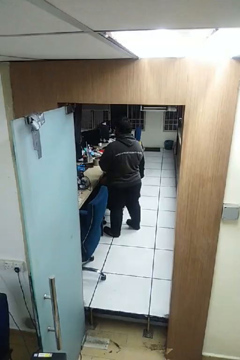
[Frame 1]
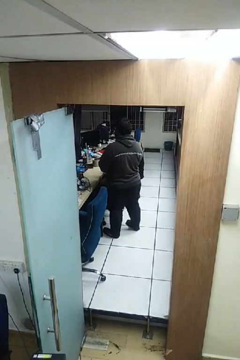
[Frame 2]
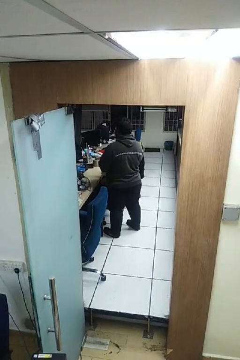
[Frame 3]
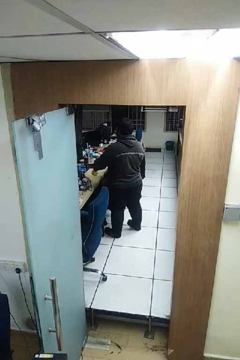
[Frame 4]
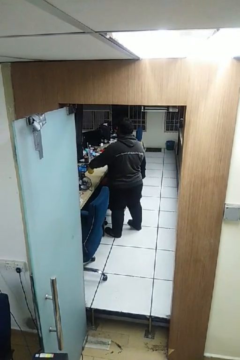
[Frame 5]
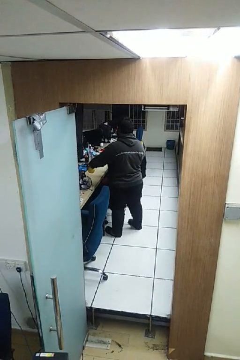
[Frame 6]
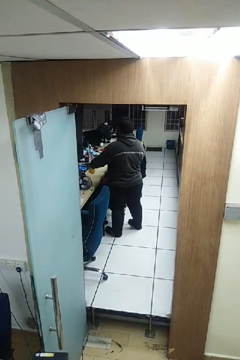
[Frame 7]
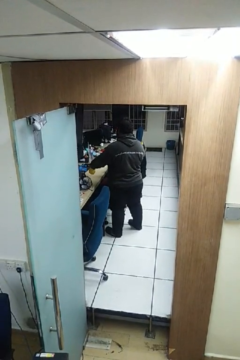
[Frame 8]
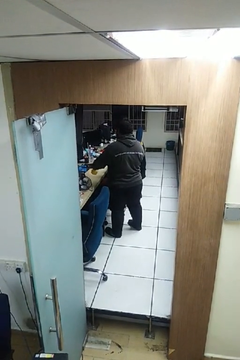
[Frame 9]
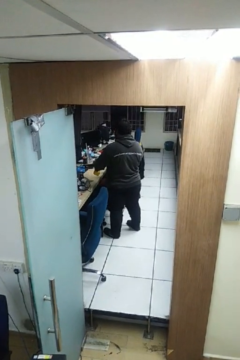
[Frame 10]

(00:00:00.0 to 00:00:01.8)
person sprays from bottle

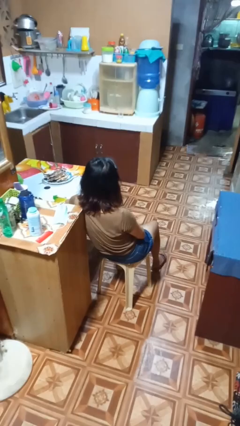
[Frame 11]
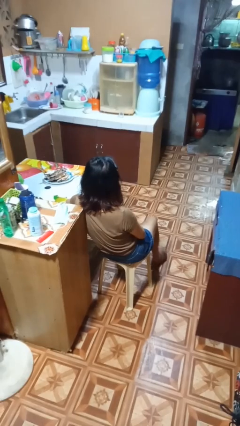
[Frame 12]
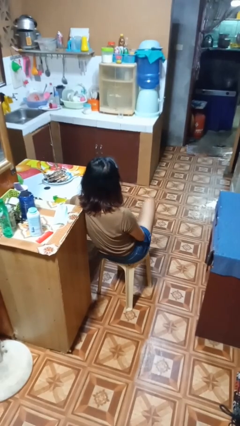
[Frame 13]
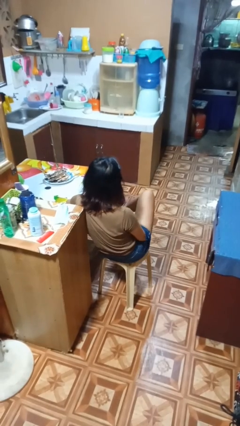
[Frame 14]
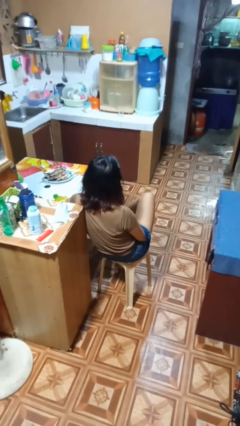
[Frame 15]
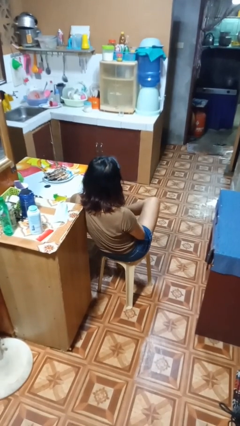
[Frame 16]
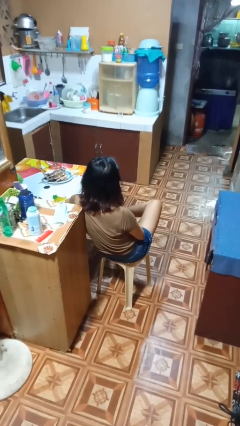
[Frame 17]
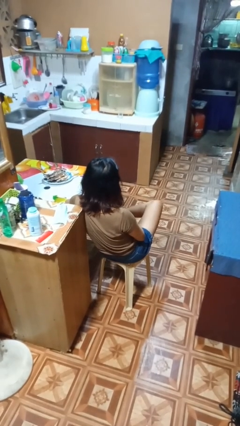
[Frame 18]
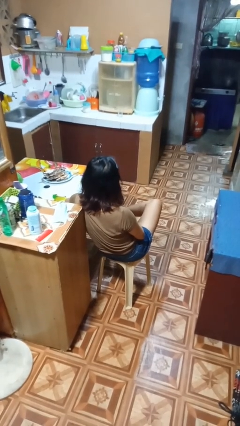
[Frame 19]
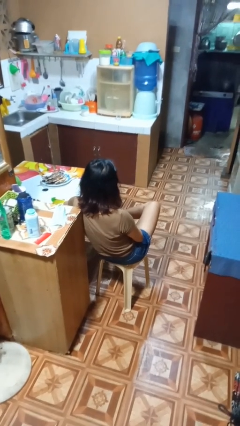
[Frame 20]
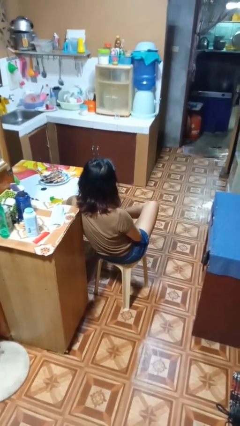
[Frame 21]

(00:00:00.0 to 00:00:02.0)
person crosses legs

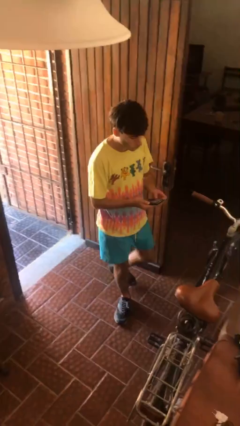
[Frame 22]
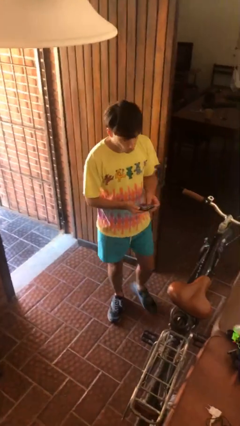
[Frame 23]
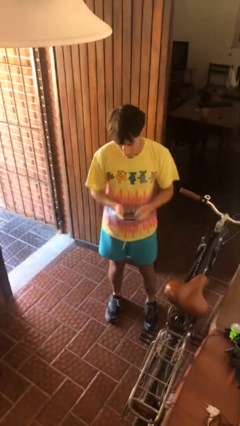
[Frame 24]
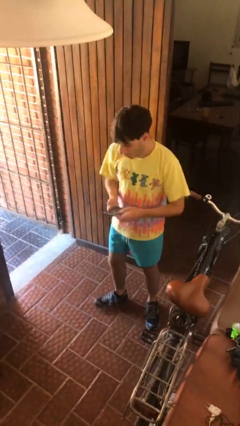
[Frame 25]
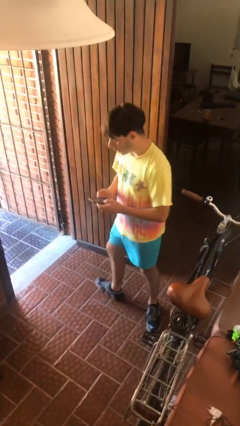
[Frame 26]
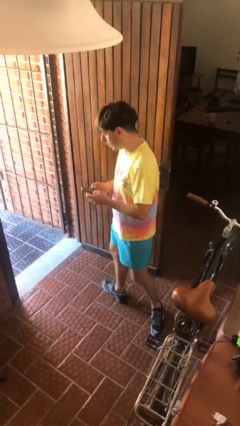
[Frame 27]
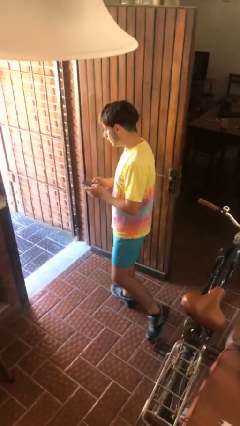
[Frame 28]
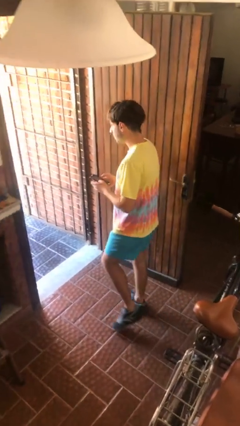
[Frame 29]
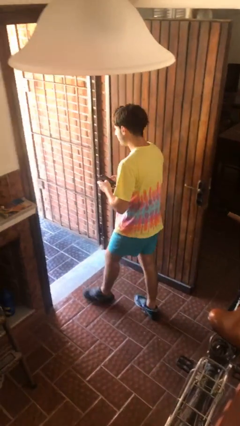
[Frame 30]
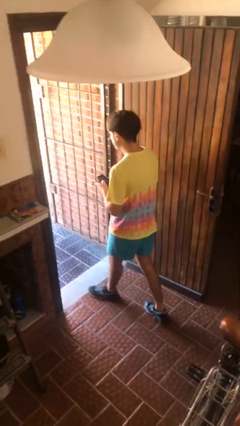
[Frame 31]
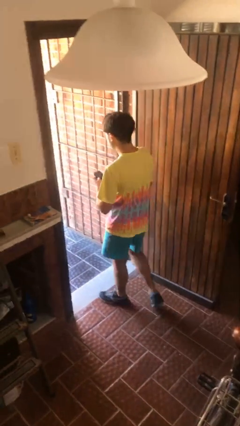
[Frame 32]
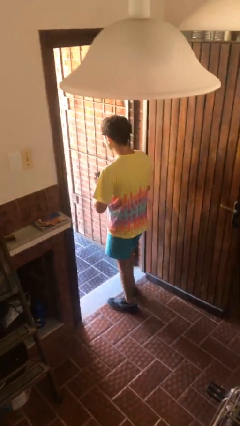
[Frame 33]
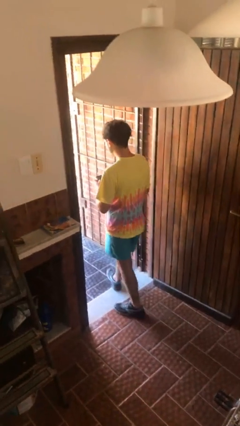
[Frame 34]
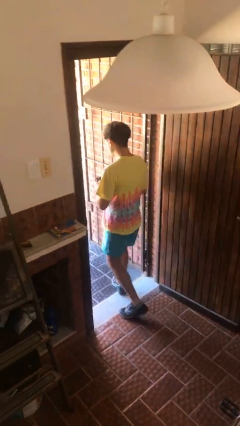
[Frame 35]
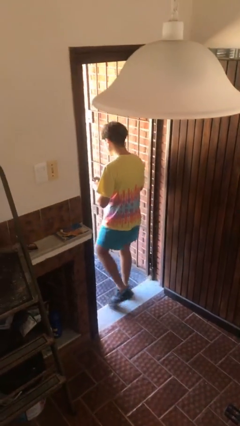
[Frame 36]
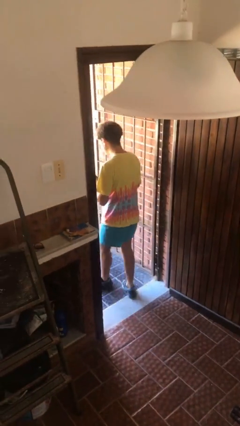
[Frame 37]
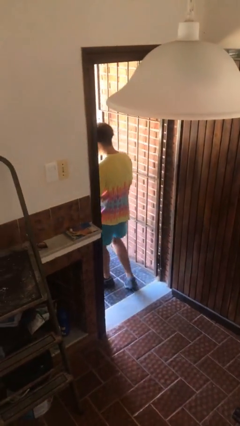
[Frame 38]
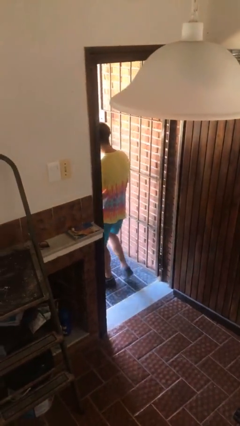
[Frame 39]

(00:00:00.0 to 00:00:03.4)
person exits scene through structure

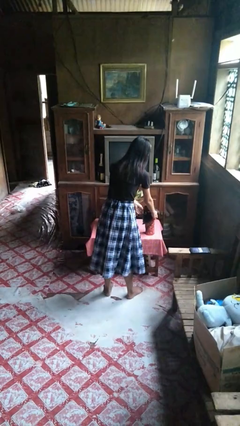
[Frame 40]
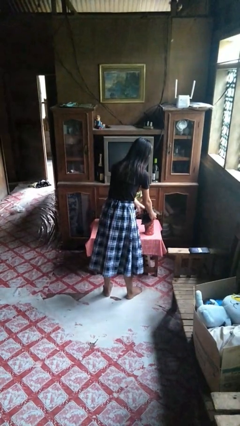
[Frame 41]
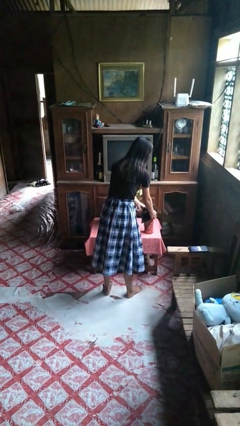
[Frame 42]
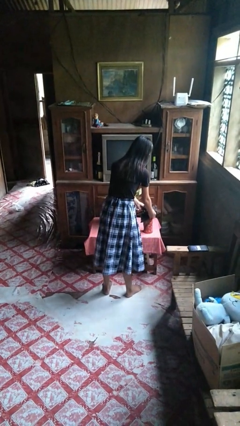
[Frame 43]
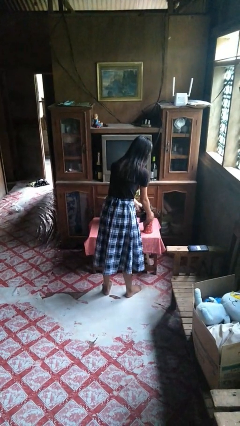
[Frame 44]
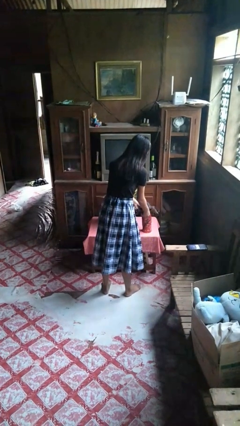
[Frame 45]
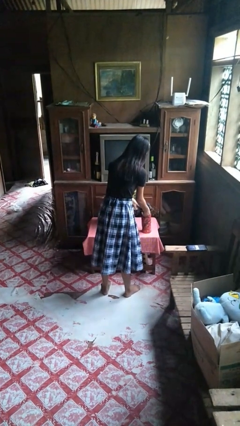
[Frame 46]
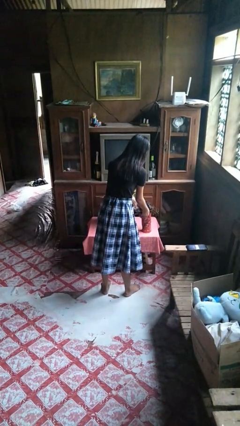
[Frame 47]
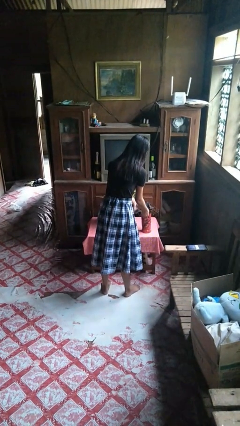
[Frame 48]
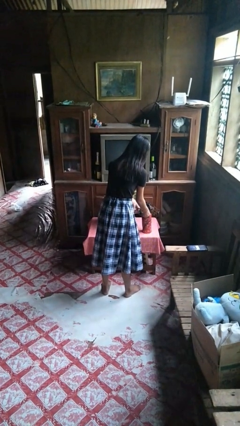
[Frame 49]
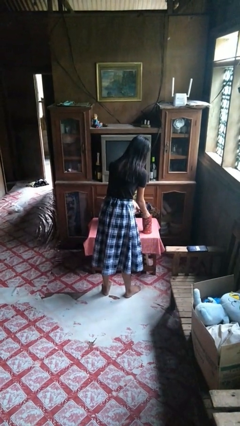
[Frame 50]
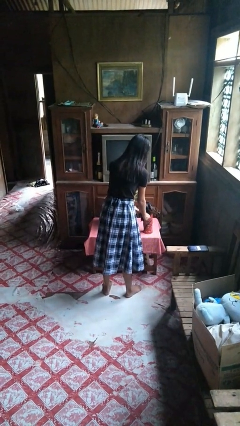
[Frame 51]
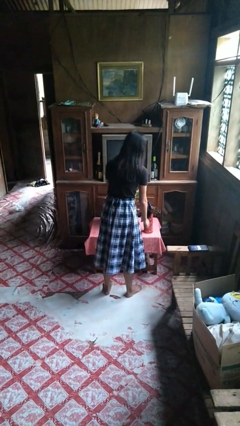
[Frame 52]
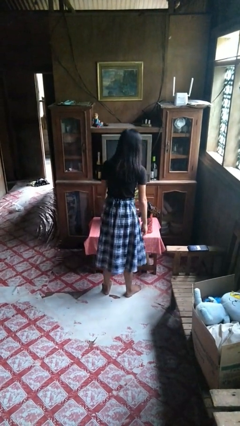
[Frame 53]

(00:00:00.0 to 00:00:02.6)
person arranges flowers in vase

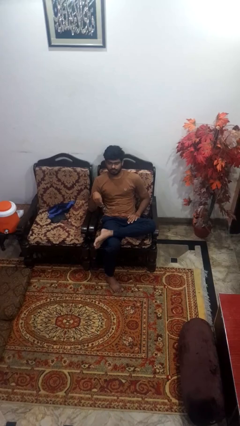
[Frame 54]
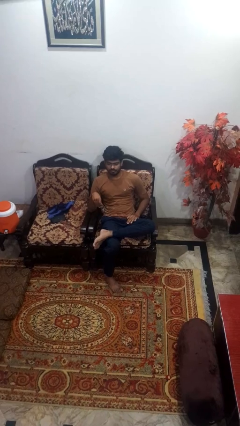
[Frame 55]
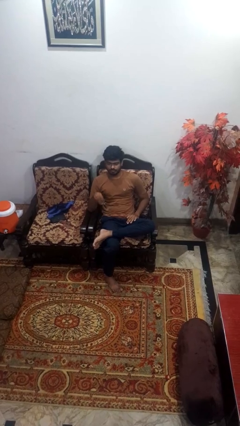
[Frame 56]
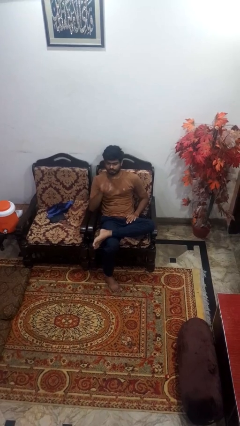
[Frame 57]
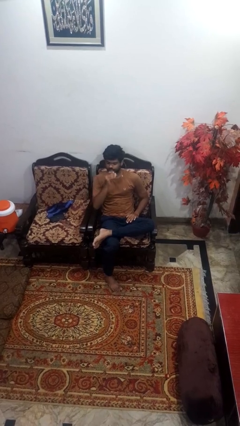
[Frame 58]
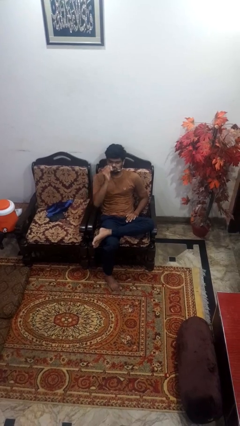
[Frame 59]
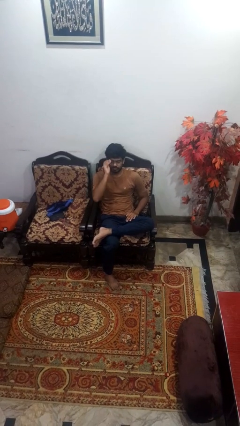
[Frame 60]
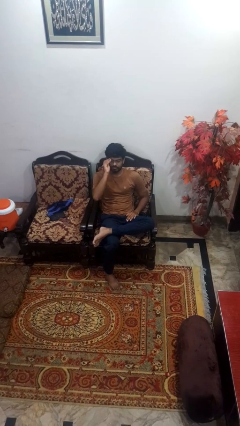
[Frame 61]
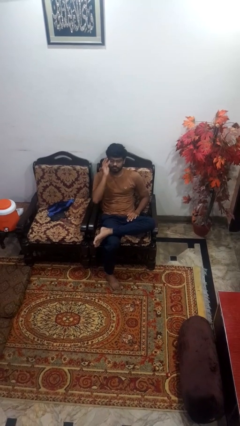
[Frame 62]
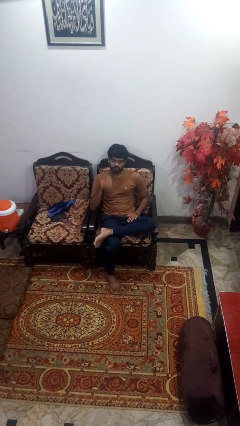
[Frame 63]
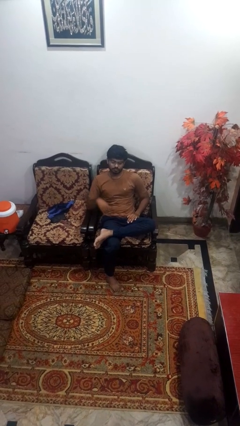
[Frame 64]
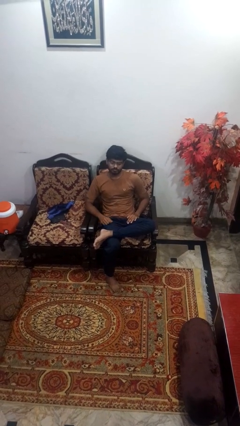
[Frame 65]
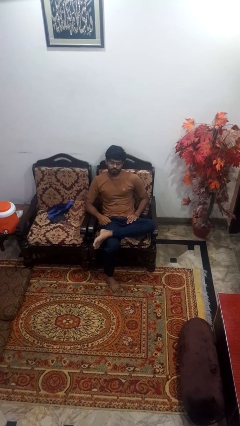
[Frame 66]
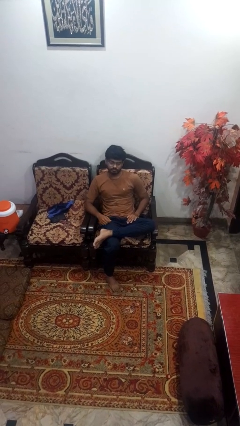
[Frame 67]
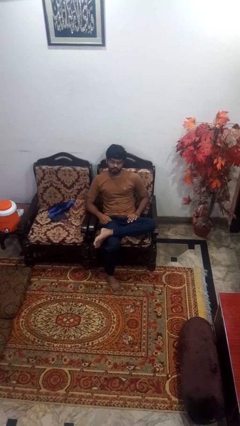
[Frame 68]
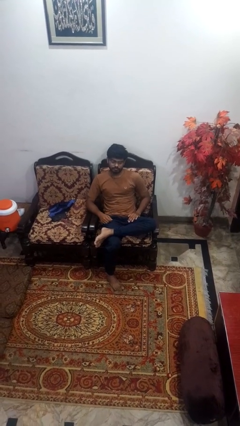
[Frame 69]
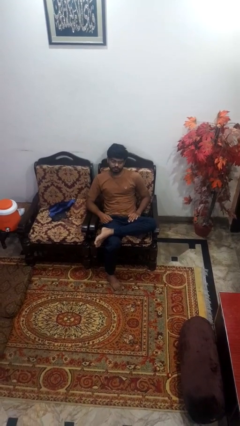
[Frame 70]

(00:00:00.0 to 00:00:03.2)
person puts on glasses

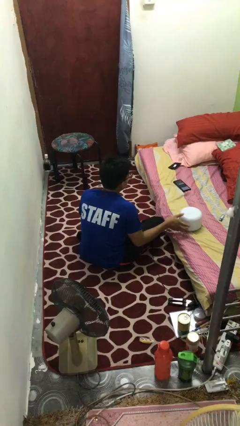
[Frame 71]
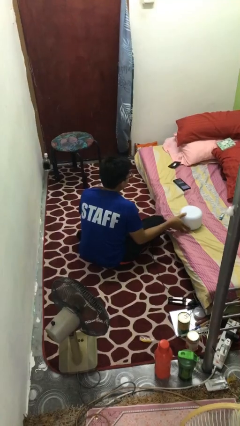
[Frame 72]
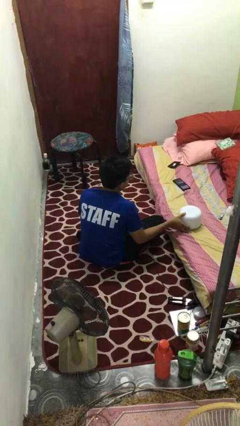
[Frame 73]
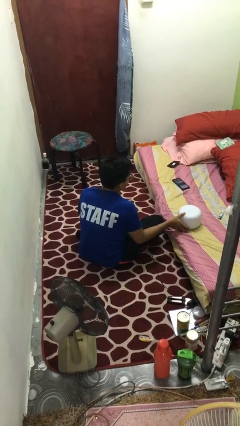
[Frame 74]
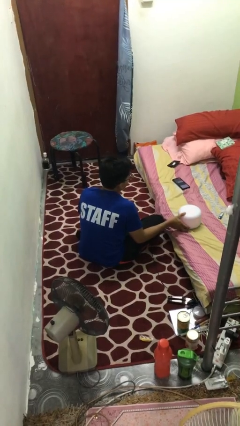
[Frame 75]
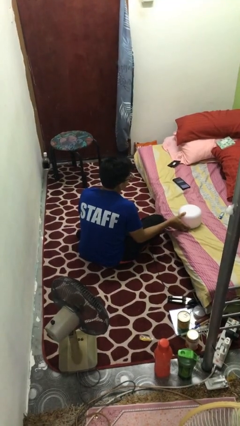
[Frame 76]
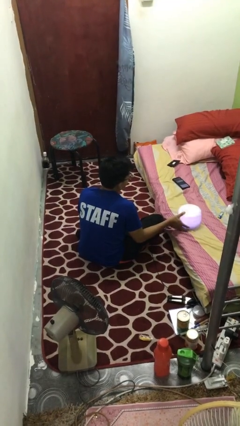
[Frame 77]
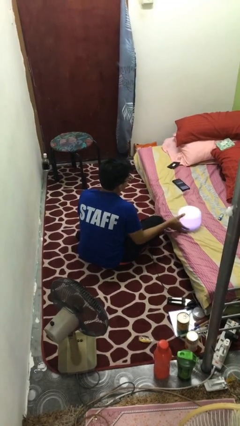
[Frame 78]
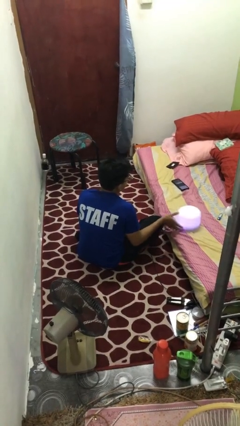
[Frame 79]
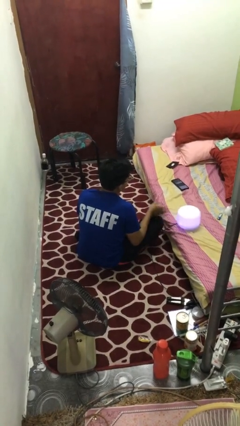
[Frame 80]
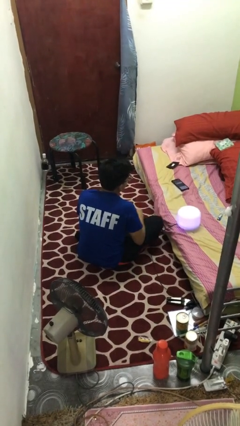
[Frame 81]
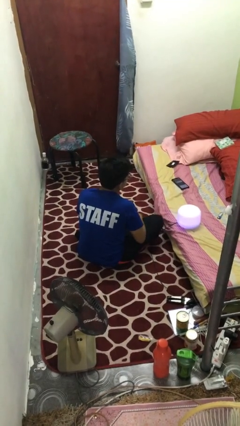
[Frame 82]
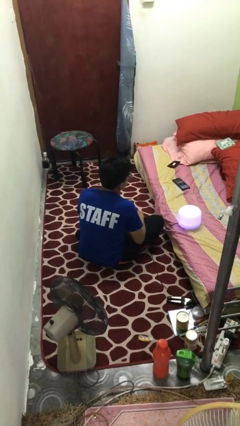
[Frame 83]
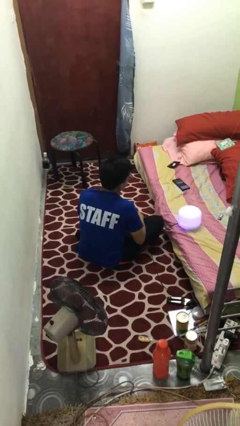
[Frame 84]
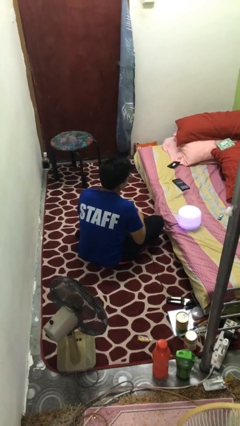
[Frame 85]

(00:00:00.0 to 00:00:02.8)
person turns on lamp

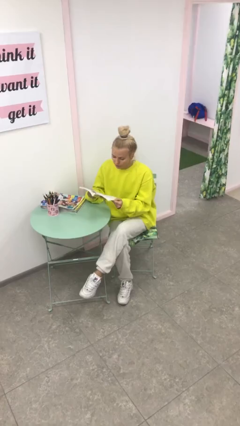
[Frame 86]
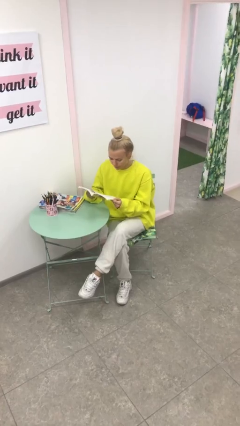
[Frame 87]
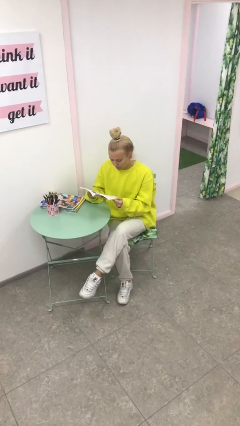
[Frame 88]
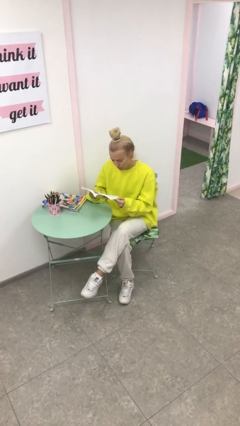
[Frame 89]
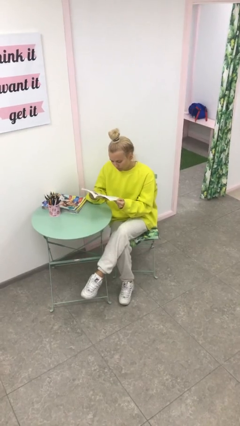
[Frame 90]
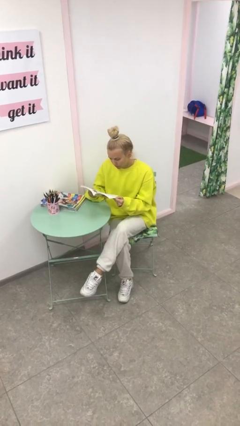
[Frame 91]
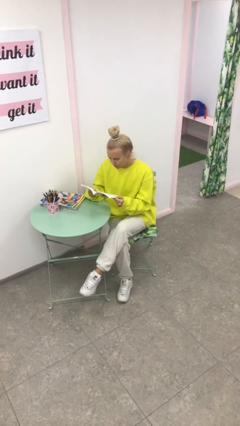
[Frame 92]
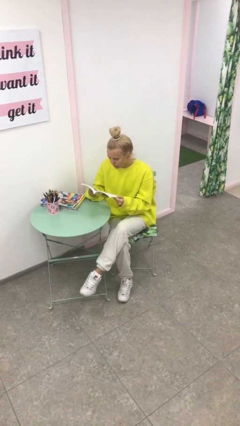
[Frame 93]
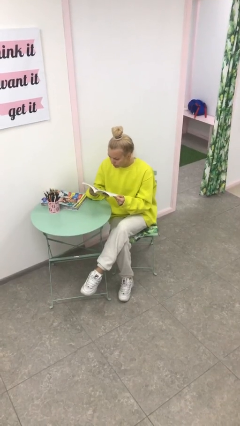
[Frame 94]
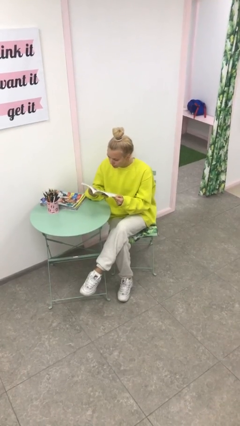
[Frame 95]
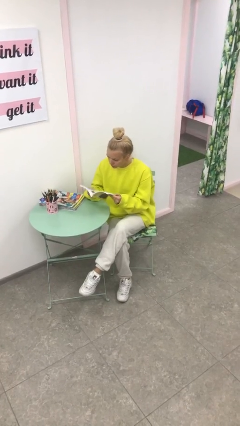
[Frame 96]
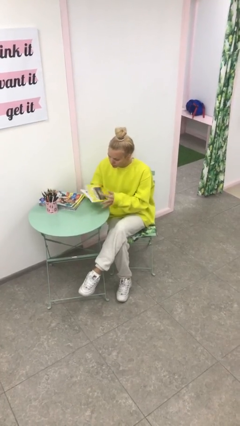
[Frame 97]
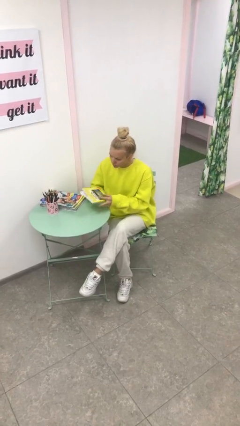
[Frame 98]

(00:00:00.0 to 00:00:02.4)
person reads document
